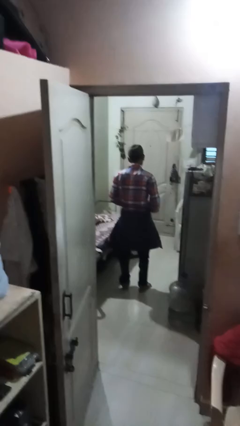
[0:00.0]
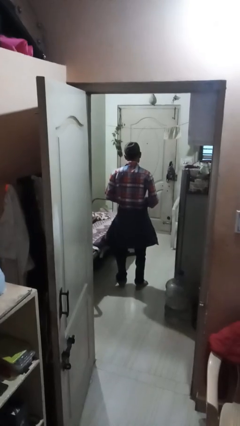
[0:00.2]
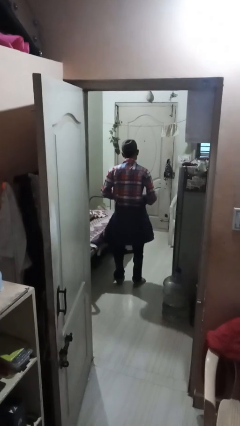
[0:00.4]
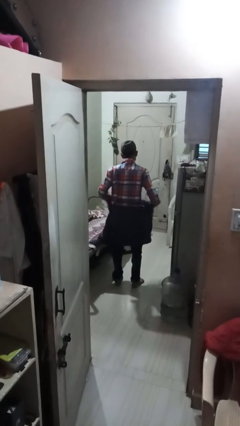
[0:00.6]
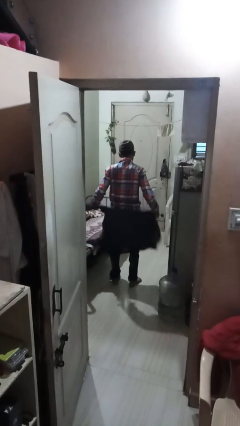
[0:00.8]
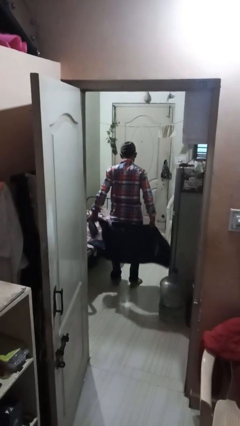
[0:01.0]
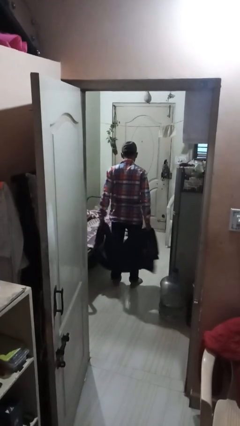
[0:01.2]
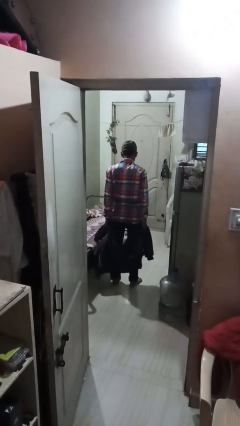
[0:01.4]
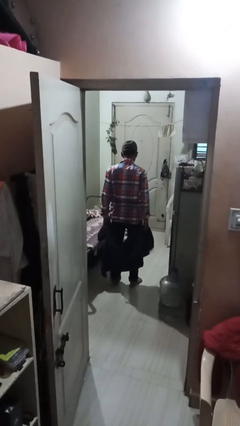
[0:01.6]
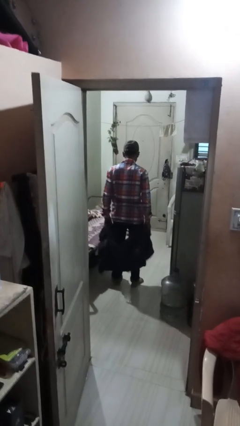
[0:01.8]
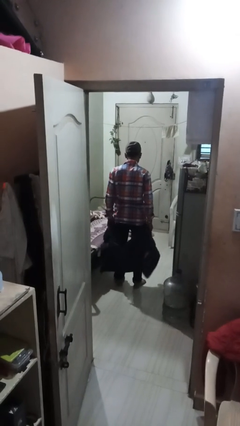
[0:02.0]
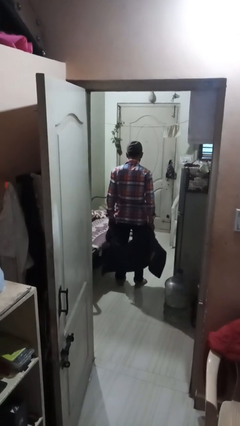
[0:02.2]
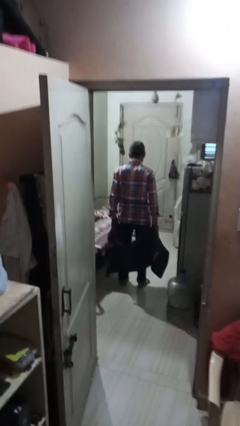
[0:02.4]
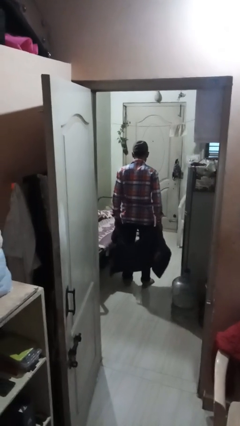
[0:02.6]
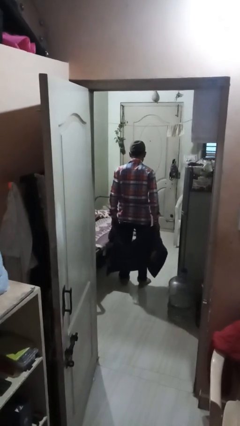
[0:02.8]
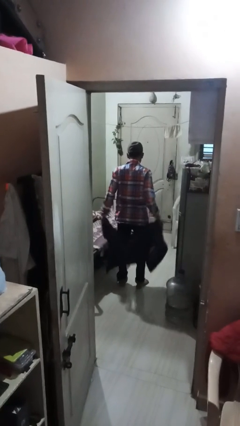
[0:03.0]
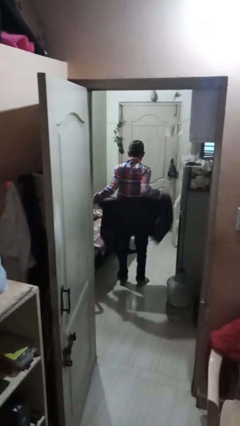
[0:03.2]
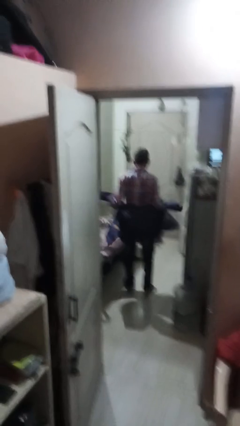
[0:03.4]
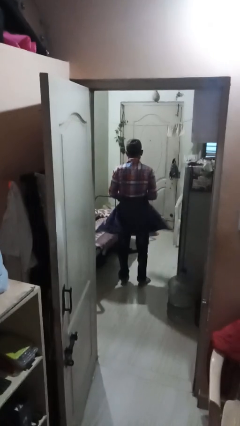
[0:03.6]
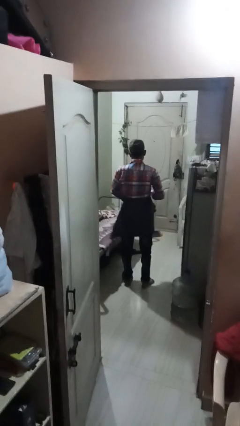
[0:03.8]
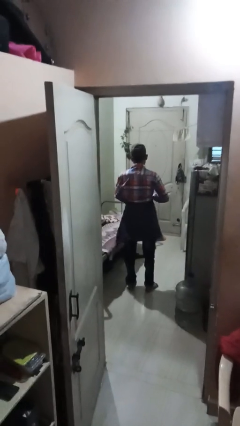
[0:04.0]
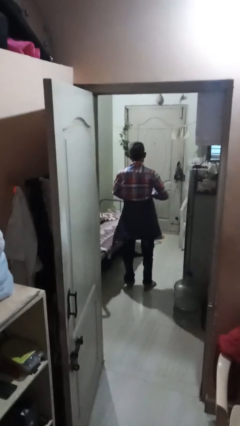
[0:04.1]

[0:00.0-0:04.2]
person unties jacket around waist

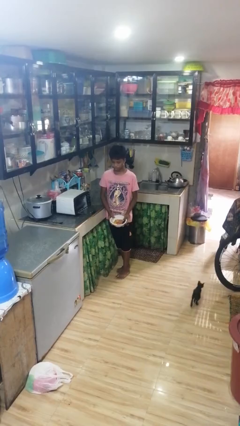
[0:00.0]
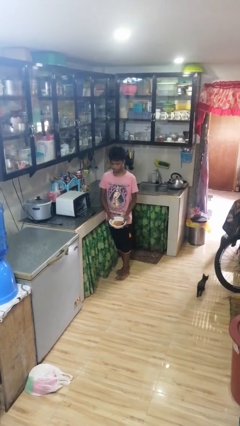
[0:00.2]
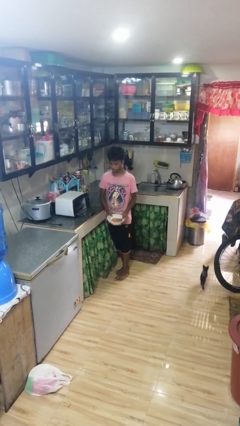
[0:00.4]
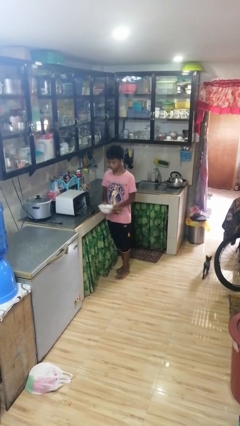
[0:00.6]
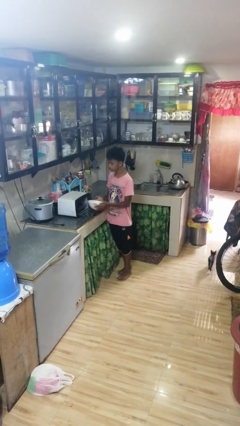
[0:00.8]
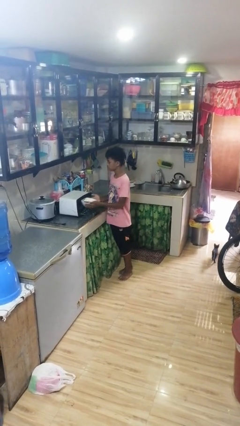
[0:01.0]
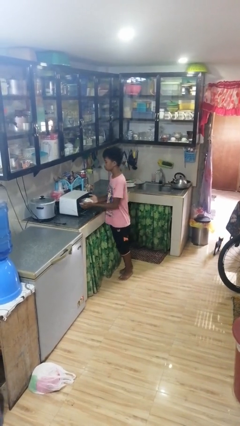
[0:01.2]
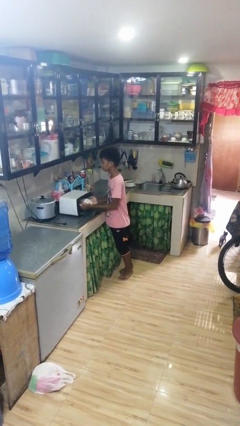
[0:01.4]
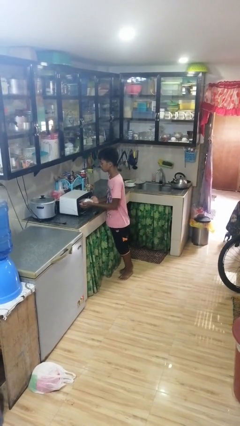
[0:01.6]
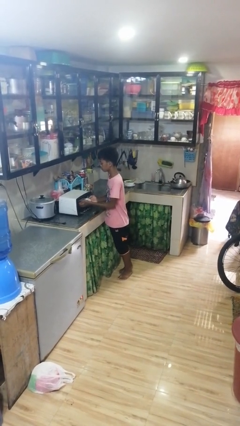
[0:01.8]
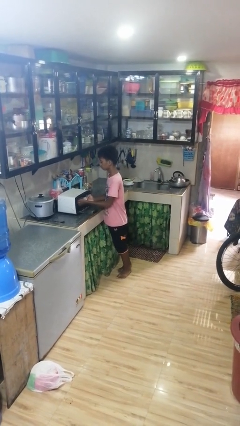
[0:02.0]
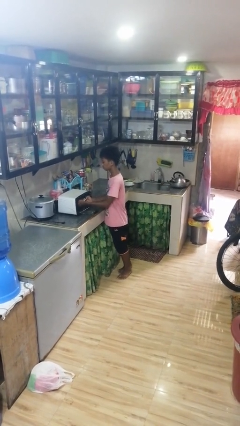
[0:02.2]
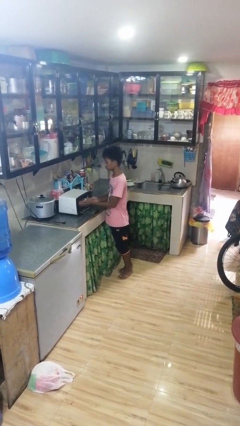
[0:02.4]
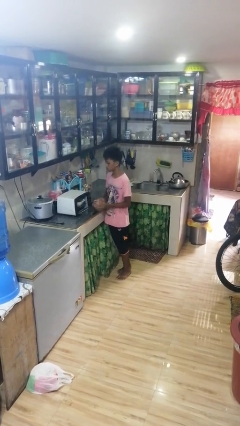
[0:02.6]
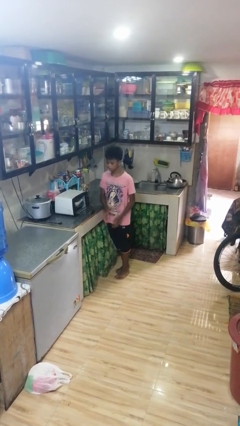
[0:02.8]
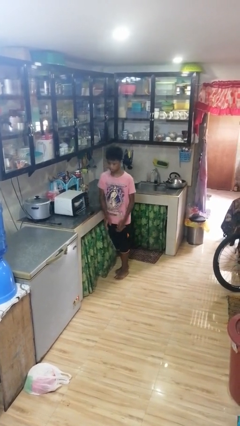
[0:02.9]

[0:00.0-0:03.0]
person puts object into microwave

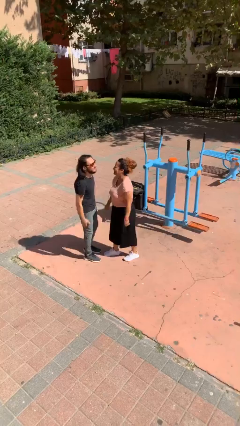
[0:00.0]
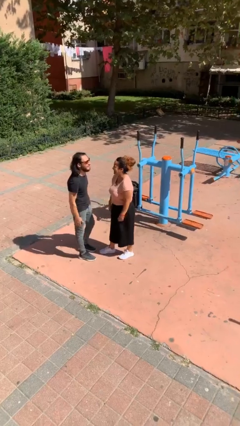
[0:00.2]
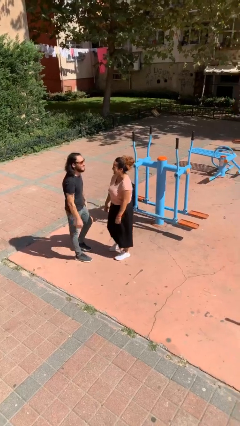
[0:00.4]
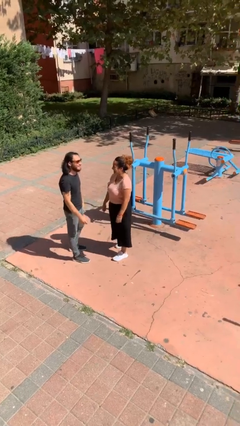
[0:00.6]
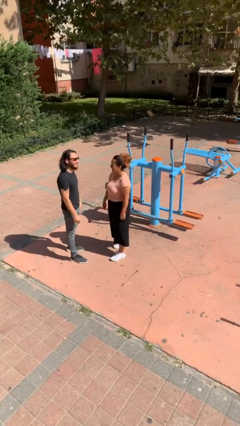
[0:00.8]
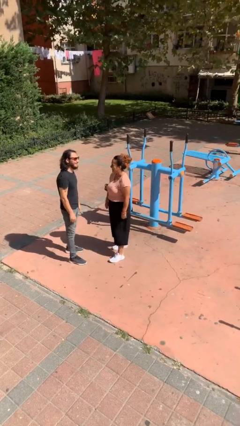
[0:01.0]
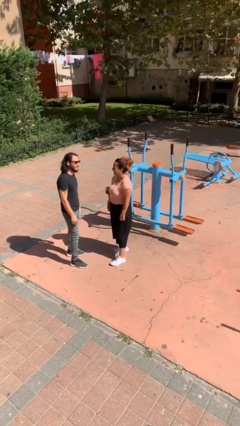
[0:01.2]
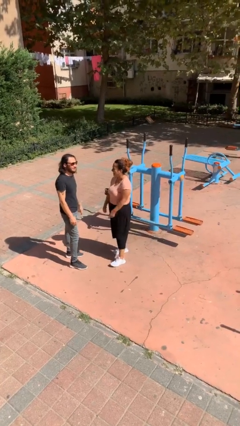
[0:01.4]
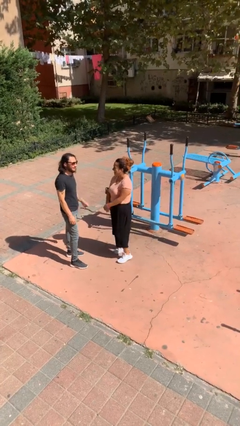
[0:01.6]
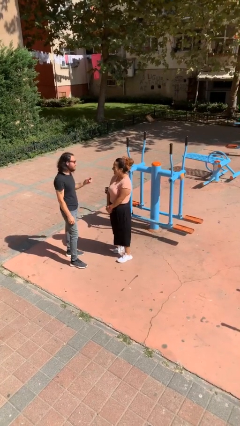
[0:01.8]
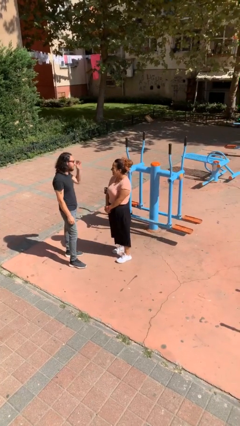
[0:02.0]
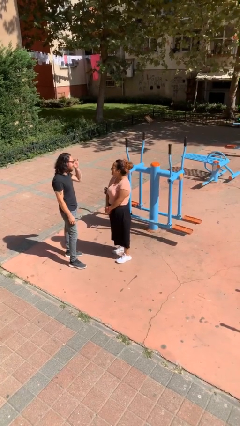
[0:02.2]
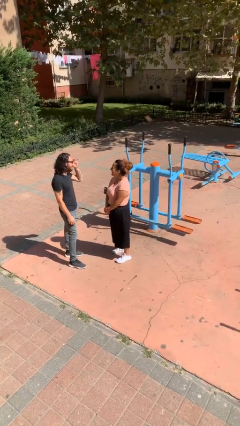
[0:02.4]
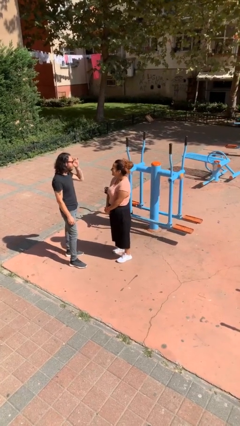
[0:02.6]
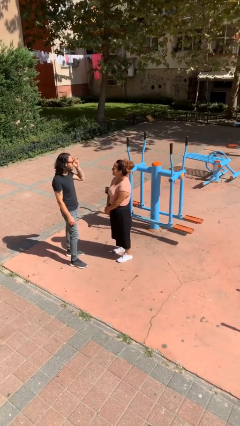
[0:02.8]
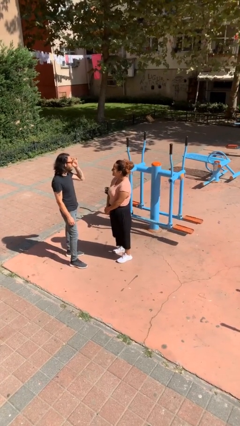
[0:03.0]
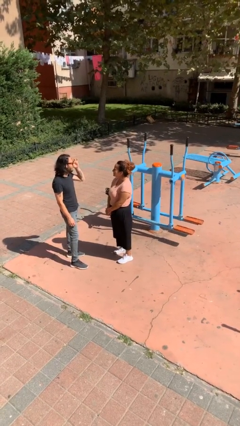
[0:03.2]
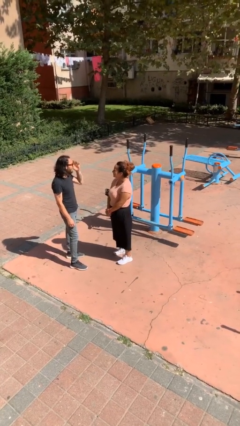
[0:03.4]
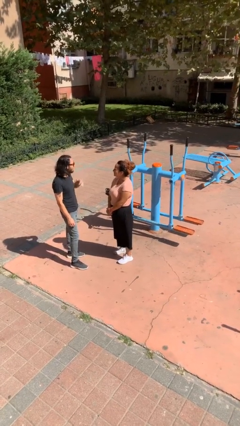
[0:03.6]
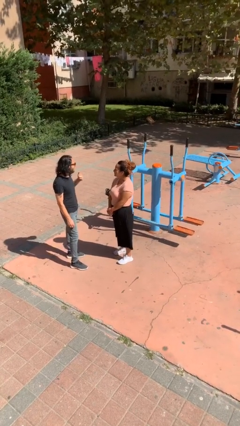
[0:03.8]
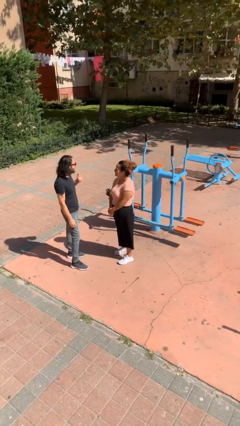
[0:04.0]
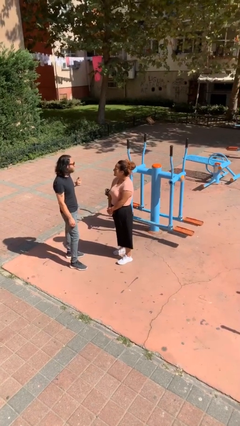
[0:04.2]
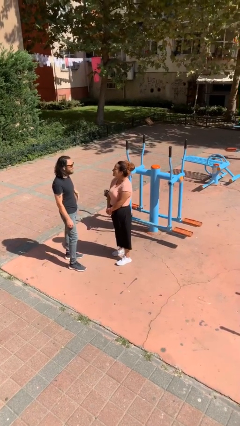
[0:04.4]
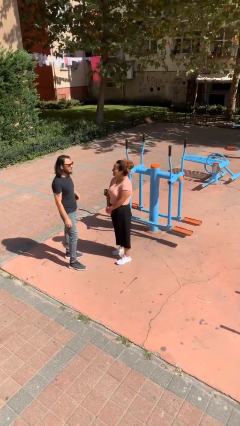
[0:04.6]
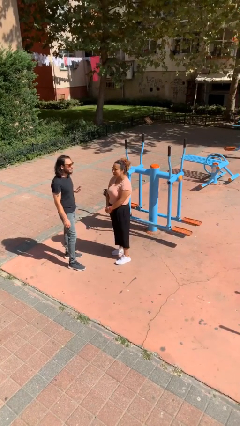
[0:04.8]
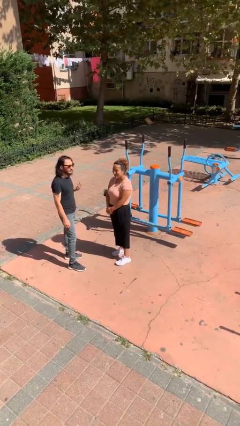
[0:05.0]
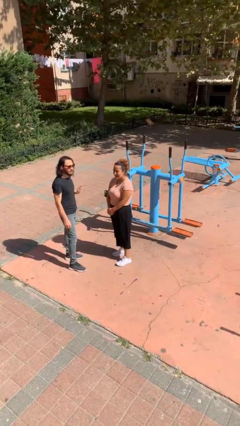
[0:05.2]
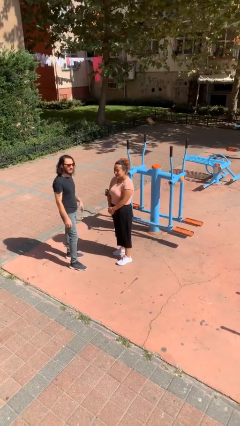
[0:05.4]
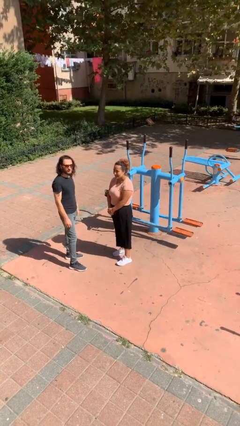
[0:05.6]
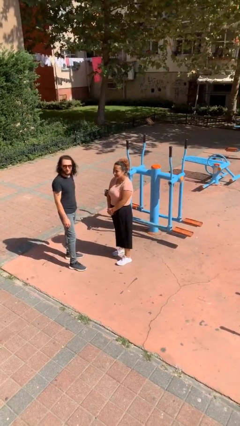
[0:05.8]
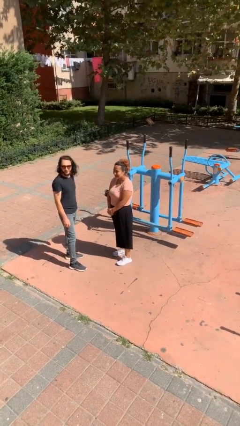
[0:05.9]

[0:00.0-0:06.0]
person talks to person

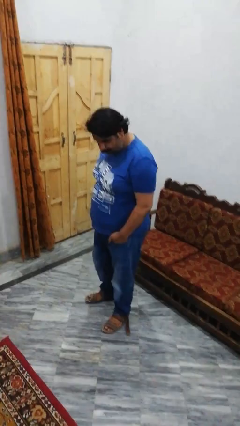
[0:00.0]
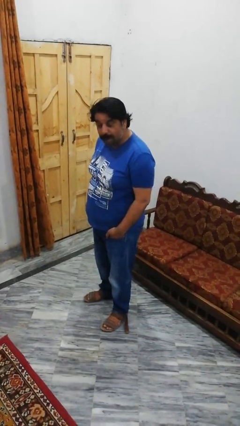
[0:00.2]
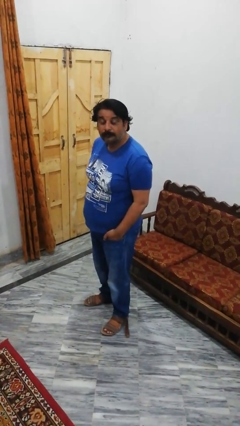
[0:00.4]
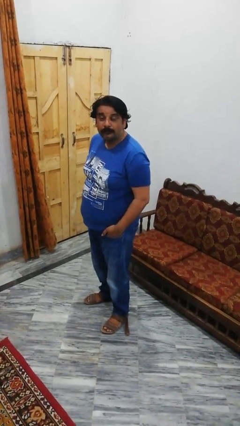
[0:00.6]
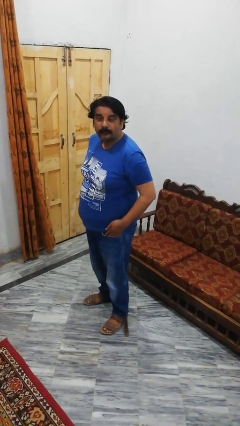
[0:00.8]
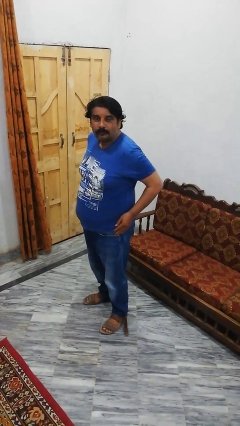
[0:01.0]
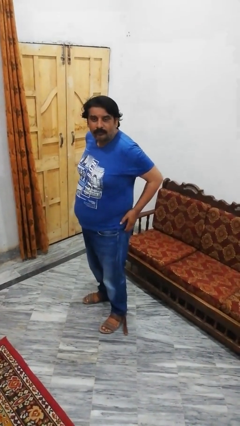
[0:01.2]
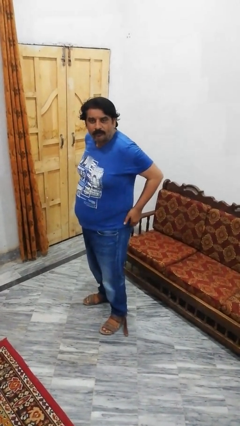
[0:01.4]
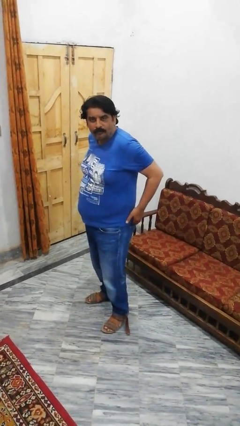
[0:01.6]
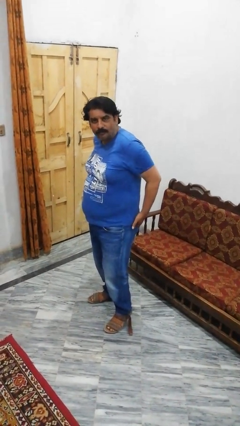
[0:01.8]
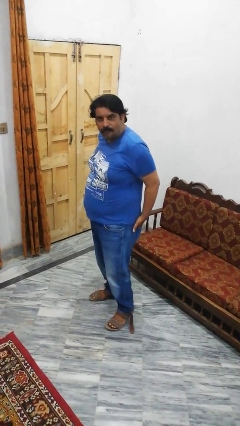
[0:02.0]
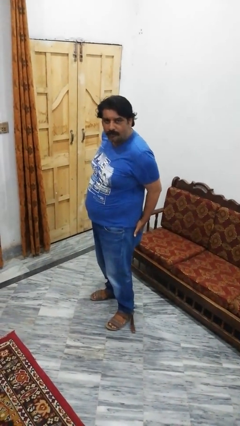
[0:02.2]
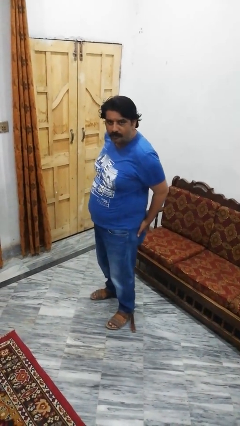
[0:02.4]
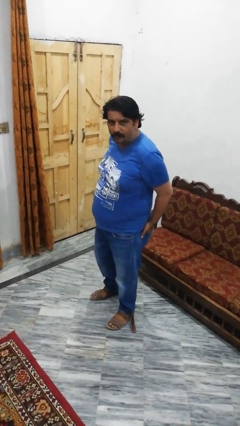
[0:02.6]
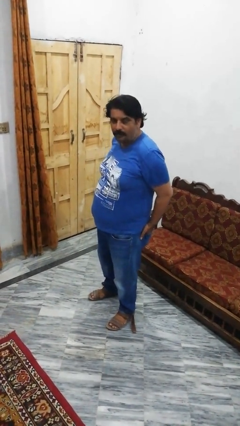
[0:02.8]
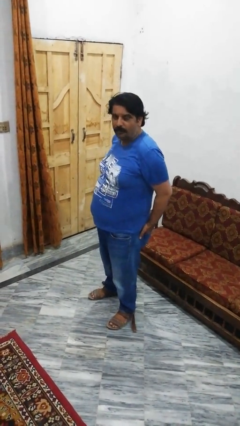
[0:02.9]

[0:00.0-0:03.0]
person puts hands in back pockets

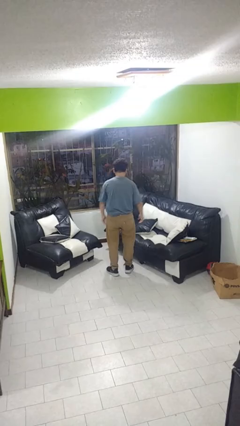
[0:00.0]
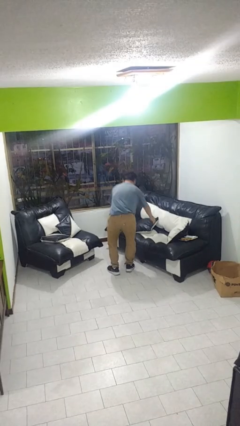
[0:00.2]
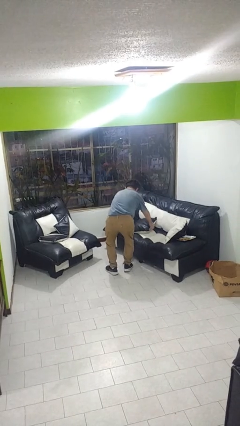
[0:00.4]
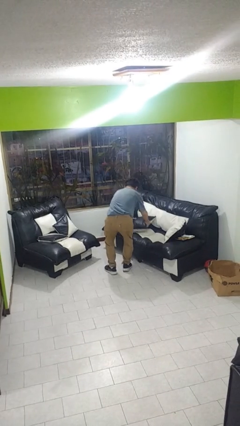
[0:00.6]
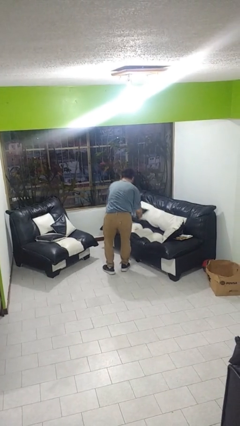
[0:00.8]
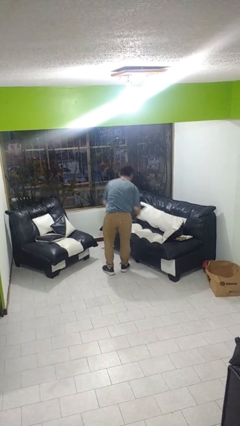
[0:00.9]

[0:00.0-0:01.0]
person picks up object from couch
